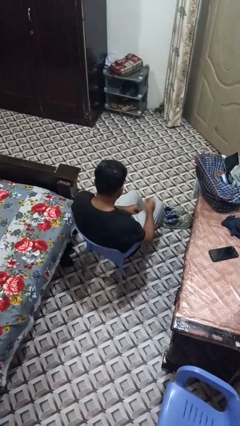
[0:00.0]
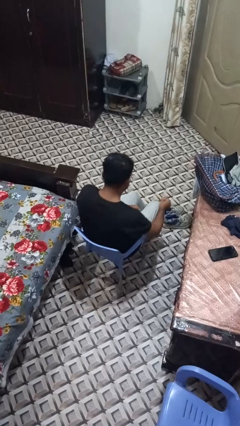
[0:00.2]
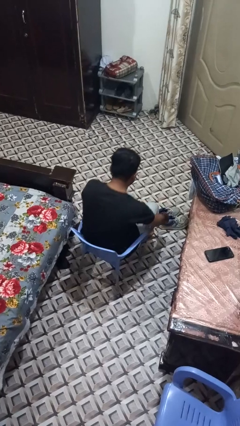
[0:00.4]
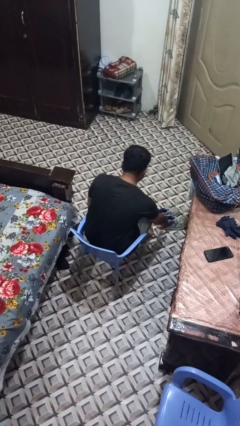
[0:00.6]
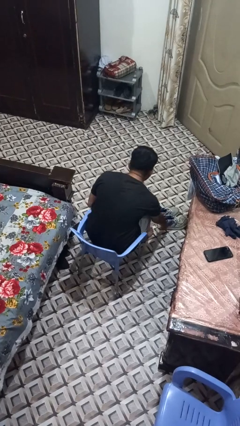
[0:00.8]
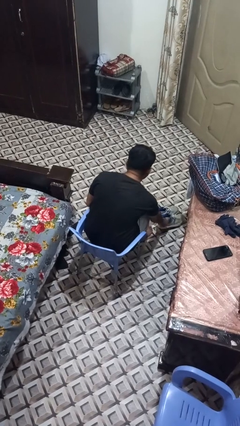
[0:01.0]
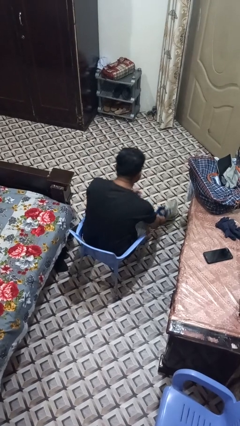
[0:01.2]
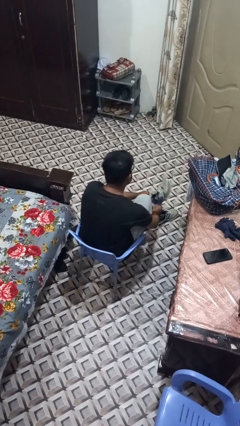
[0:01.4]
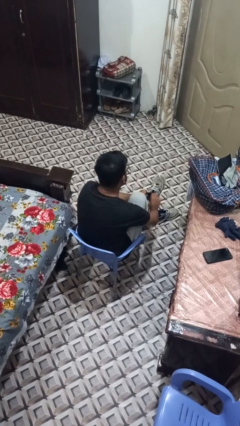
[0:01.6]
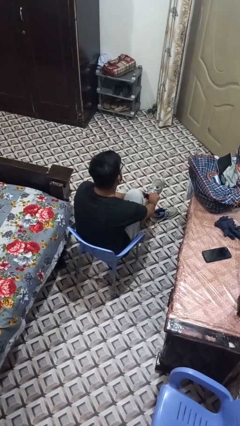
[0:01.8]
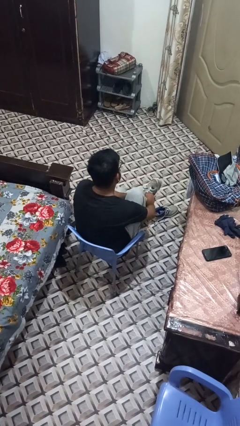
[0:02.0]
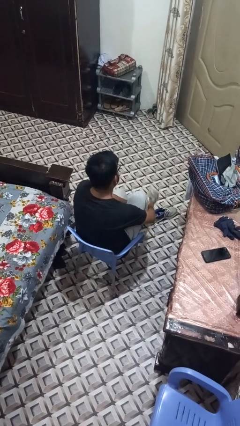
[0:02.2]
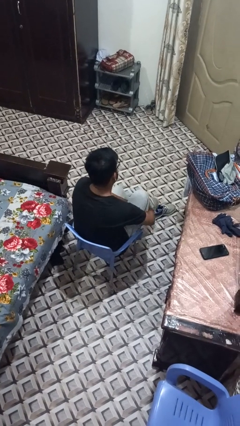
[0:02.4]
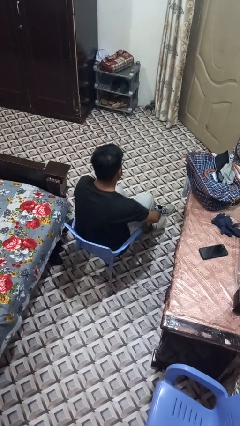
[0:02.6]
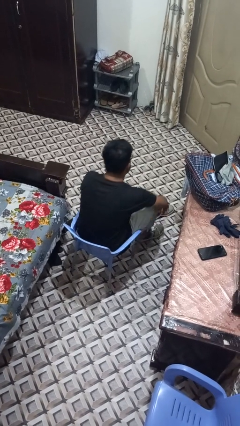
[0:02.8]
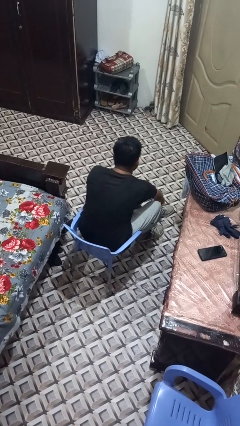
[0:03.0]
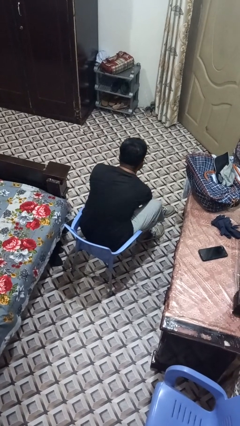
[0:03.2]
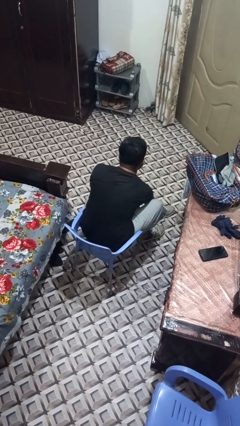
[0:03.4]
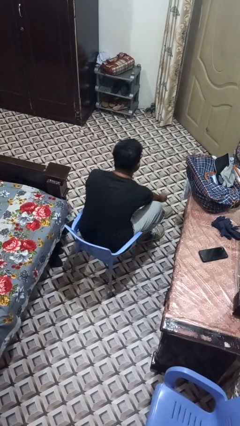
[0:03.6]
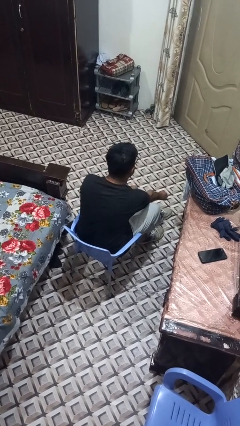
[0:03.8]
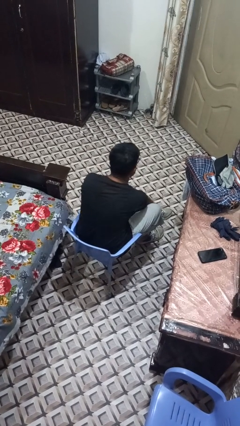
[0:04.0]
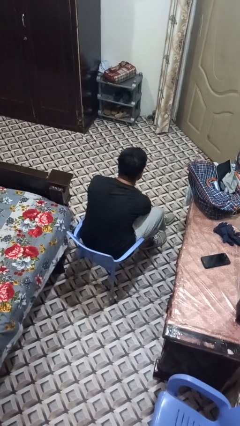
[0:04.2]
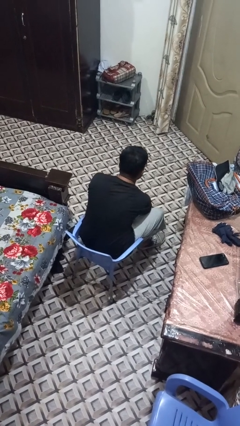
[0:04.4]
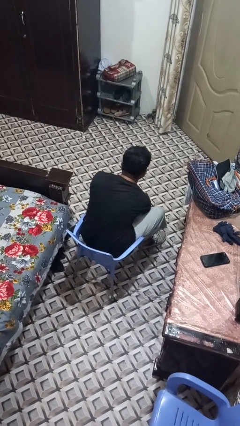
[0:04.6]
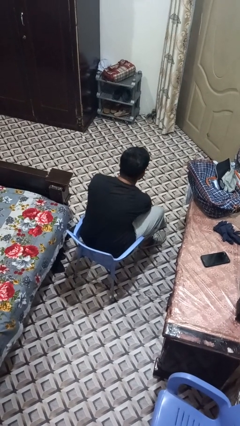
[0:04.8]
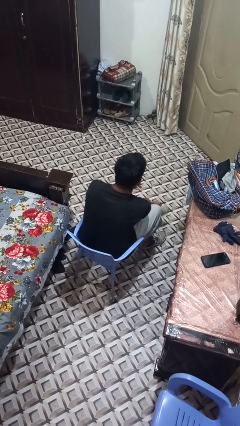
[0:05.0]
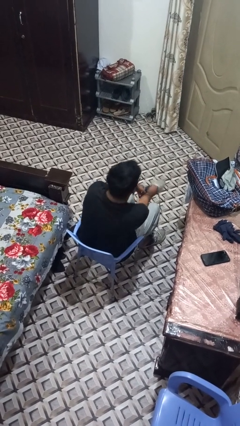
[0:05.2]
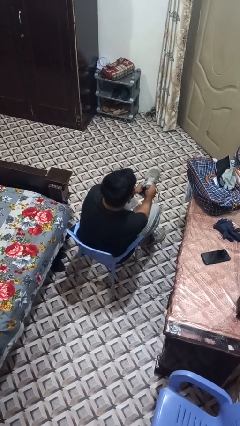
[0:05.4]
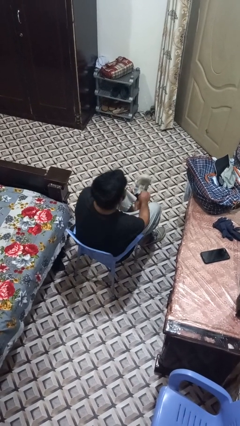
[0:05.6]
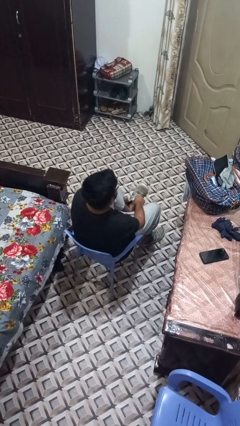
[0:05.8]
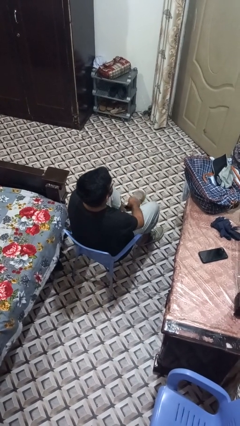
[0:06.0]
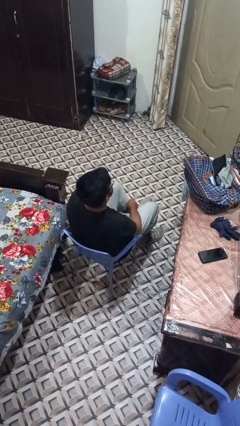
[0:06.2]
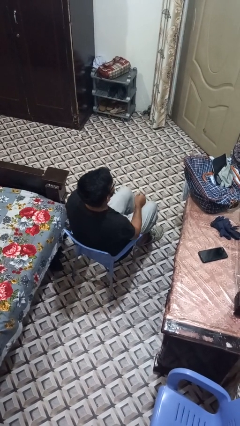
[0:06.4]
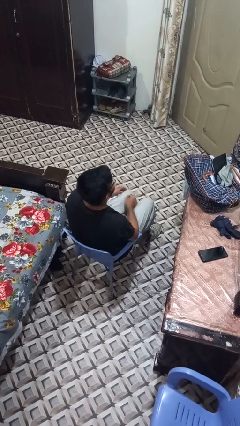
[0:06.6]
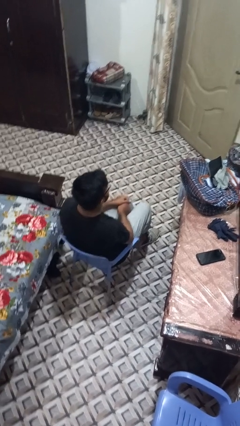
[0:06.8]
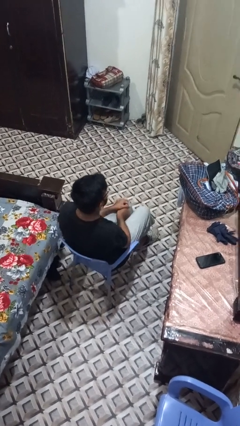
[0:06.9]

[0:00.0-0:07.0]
person puts on shoes

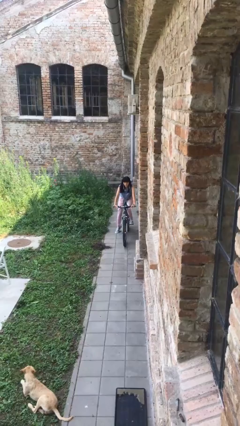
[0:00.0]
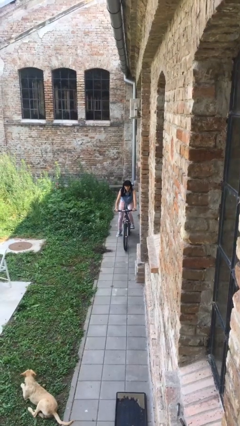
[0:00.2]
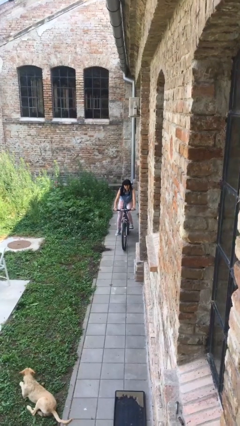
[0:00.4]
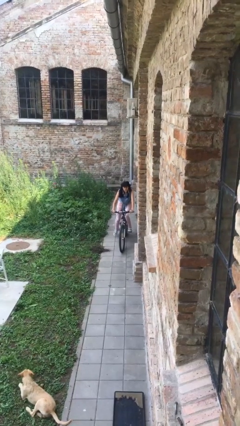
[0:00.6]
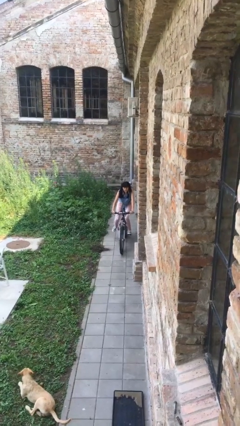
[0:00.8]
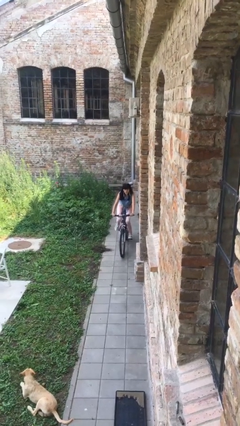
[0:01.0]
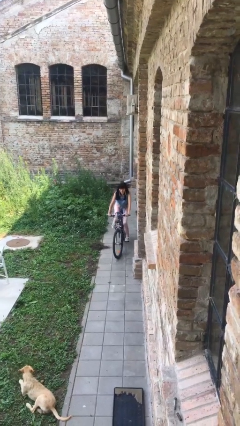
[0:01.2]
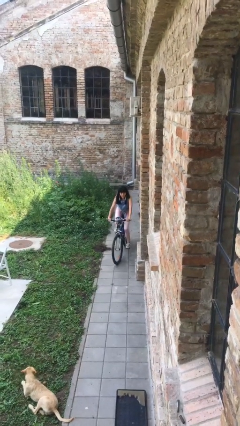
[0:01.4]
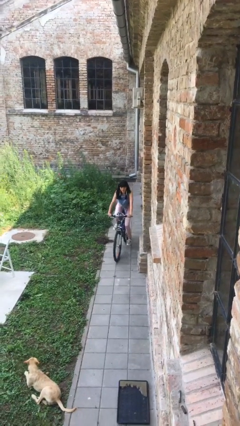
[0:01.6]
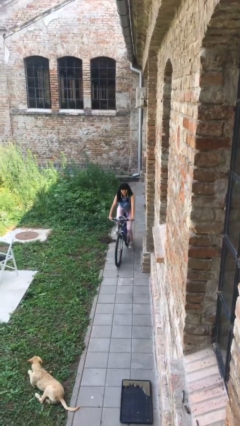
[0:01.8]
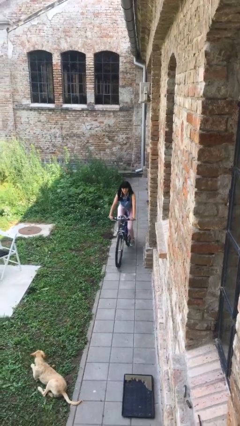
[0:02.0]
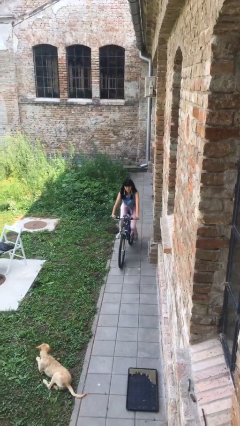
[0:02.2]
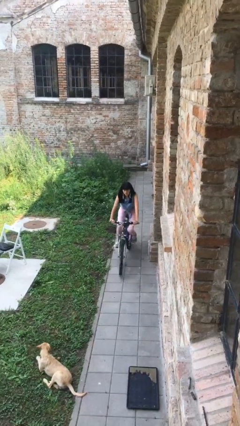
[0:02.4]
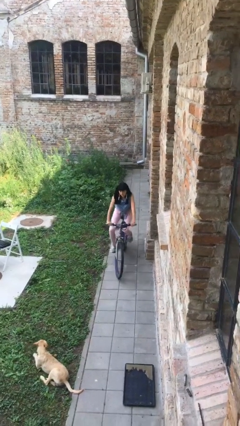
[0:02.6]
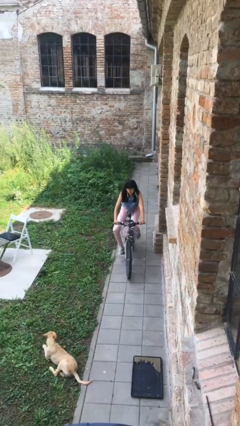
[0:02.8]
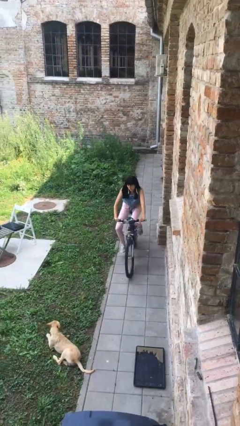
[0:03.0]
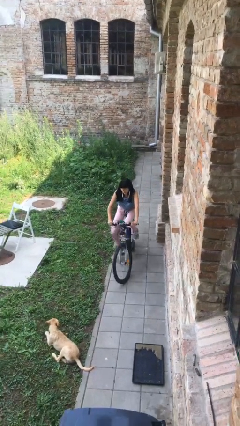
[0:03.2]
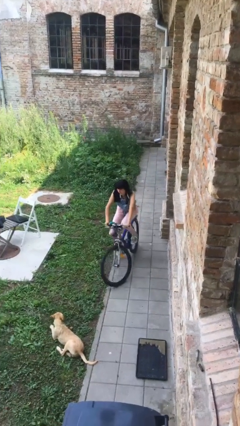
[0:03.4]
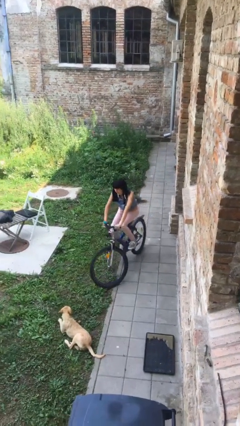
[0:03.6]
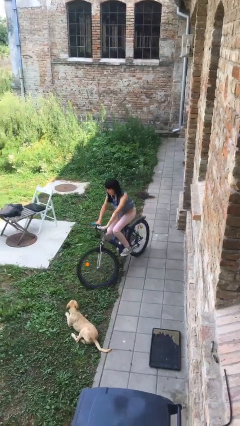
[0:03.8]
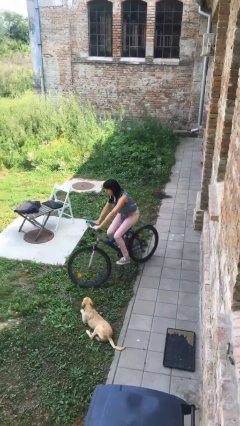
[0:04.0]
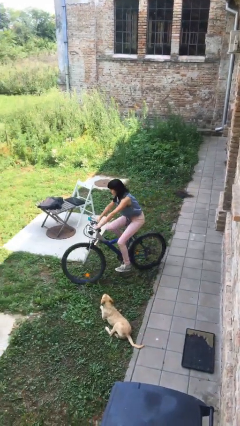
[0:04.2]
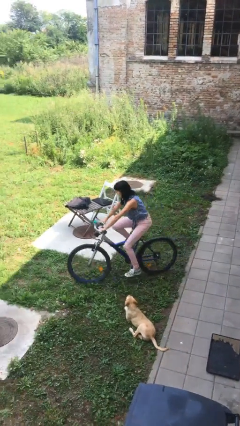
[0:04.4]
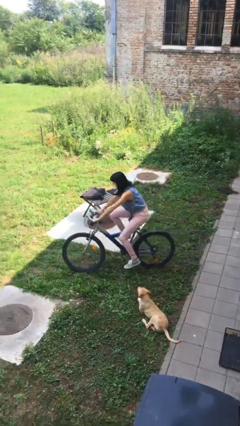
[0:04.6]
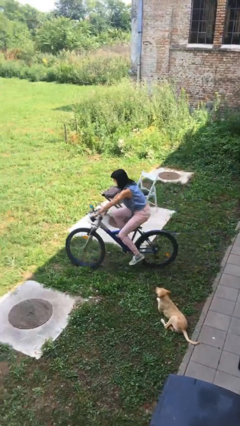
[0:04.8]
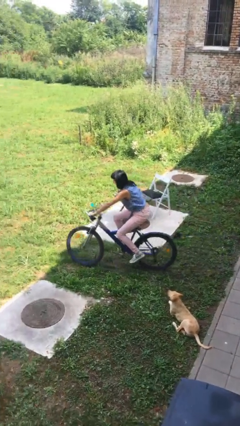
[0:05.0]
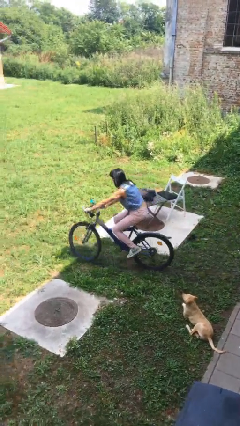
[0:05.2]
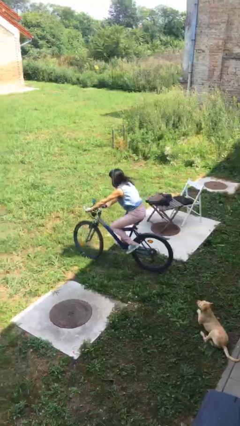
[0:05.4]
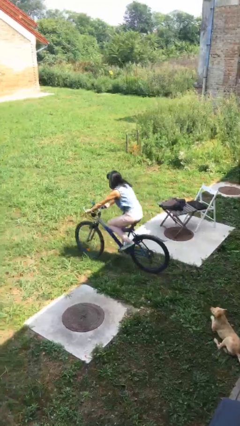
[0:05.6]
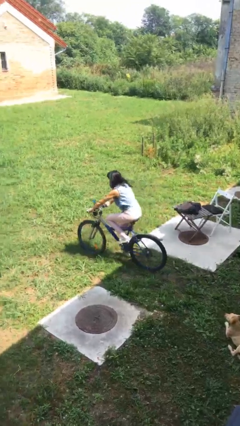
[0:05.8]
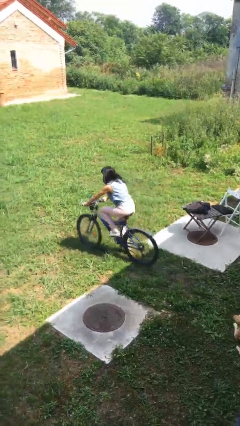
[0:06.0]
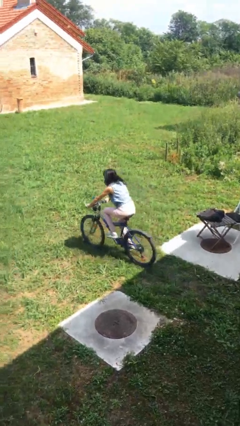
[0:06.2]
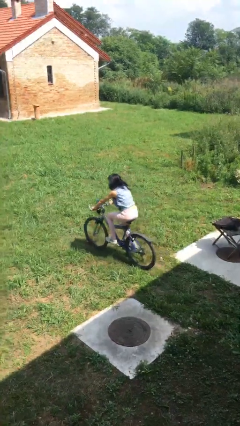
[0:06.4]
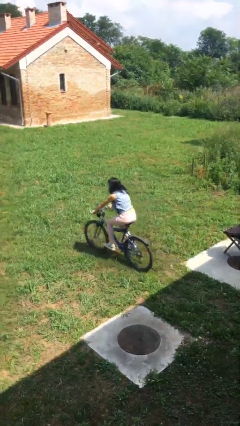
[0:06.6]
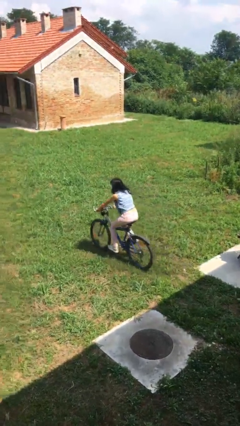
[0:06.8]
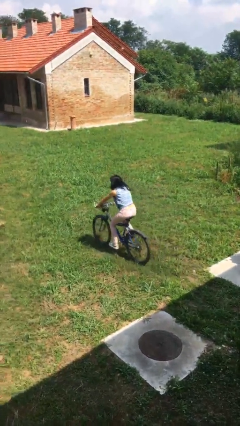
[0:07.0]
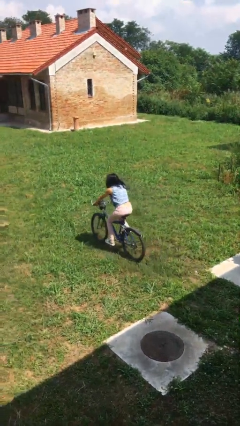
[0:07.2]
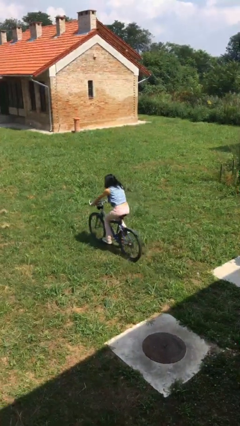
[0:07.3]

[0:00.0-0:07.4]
person rides bicycle

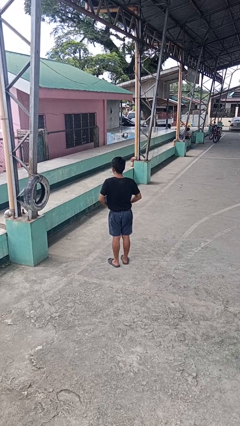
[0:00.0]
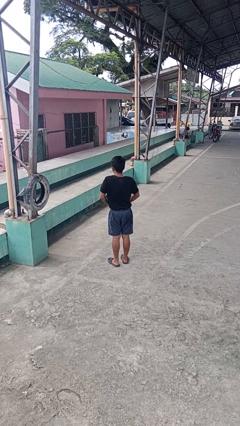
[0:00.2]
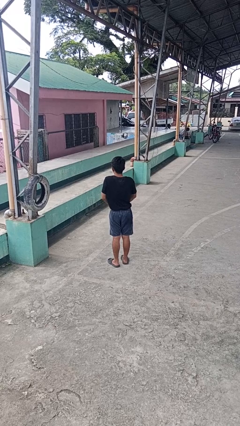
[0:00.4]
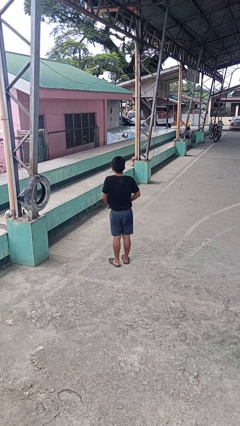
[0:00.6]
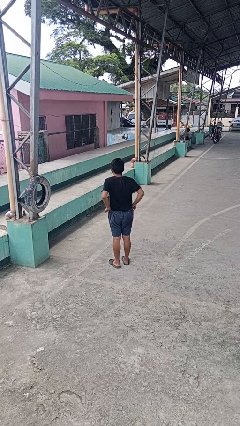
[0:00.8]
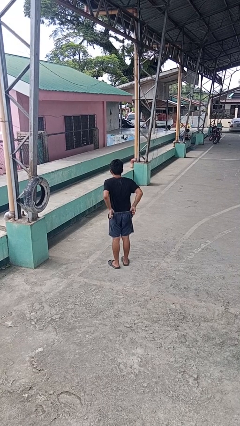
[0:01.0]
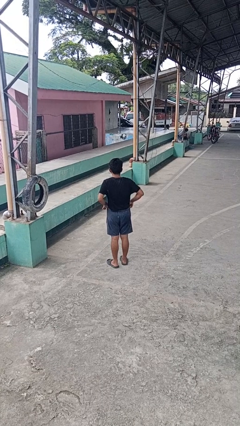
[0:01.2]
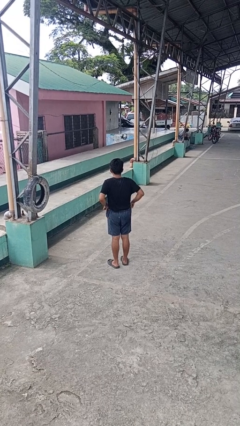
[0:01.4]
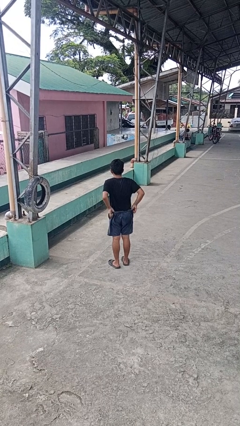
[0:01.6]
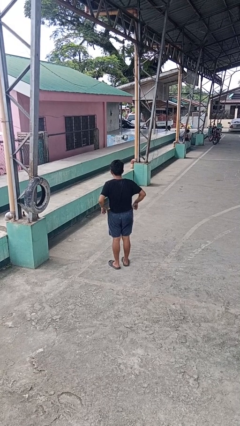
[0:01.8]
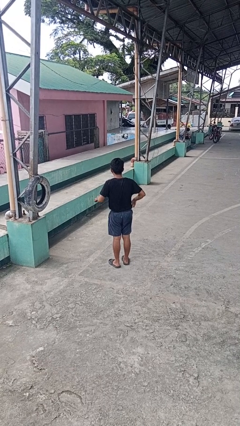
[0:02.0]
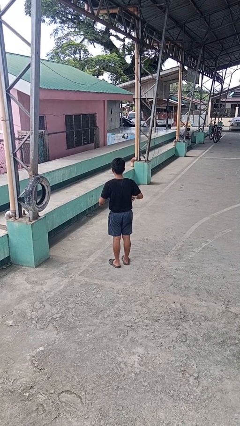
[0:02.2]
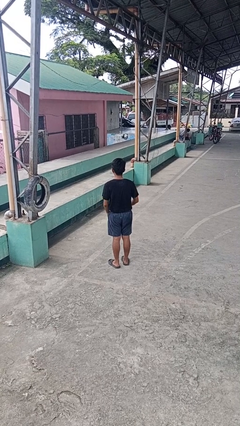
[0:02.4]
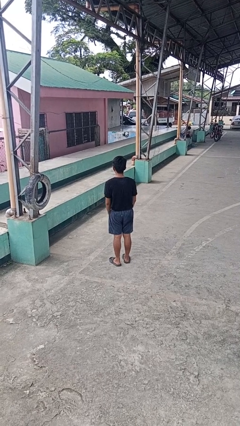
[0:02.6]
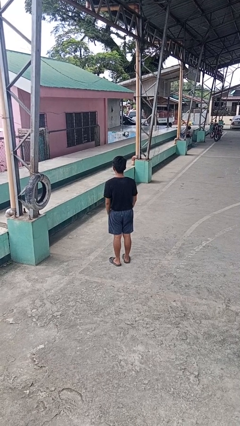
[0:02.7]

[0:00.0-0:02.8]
person hikes up pants

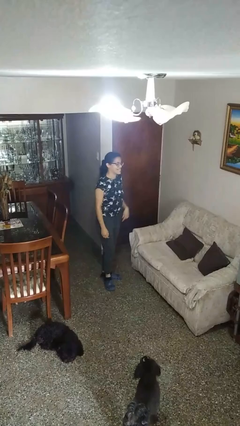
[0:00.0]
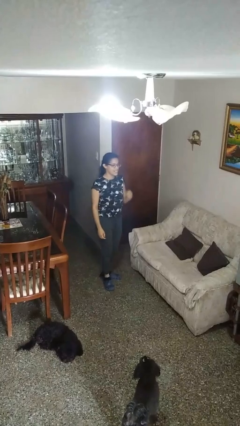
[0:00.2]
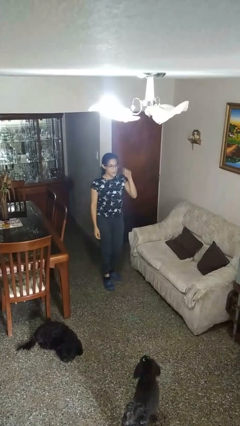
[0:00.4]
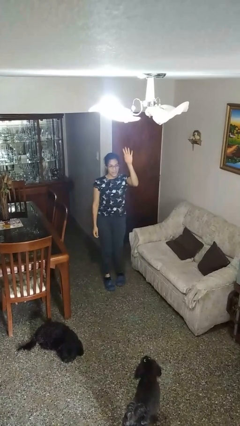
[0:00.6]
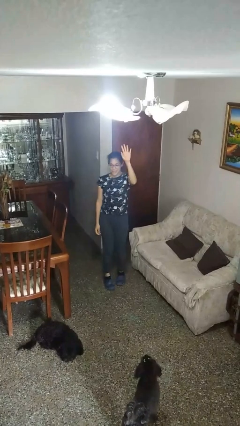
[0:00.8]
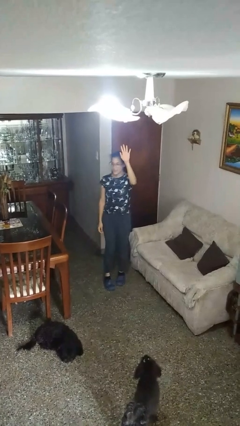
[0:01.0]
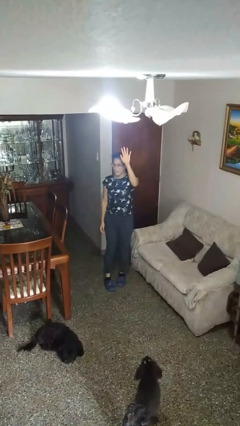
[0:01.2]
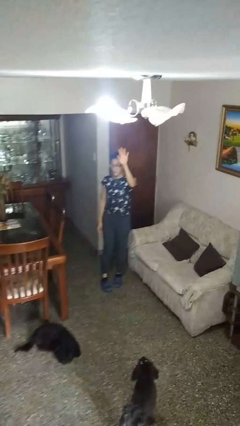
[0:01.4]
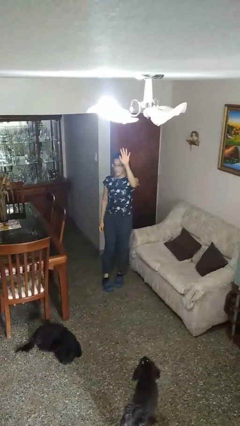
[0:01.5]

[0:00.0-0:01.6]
person gestures lower hand
